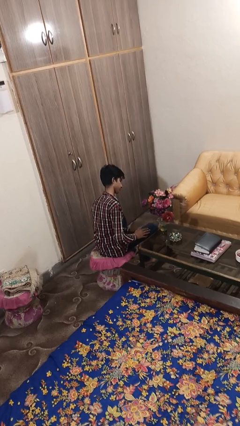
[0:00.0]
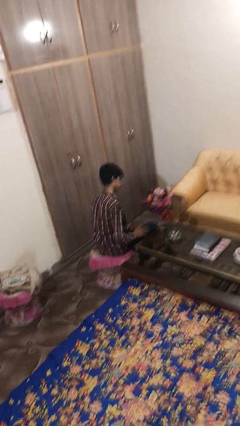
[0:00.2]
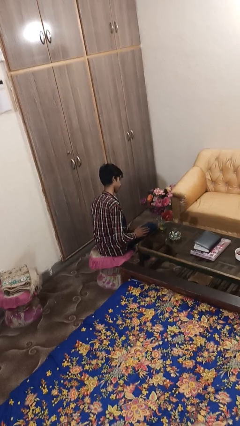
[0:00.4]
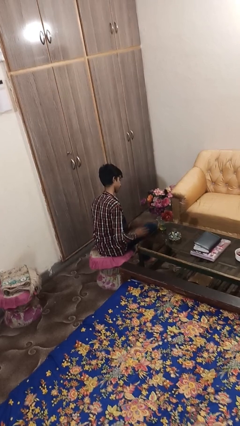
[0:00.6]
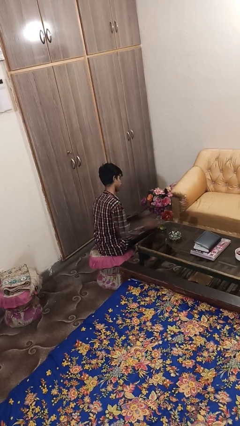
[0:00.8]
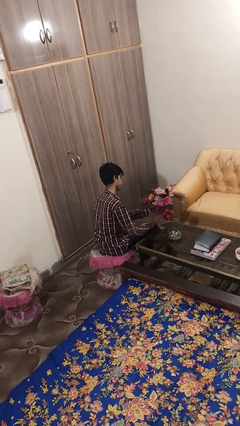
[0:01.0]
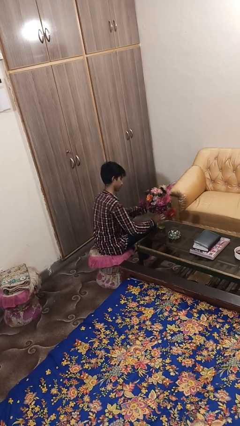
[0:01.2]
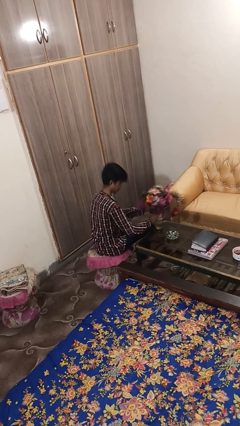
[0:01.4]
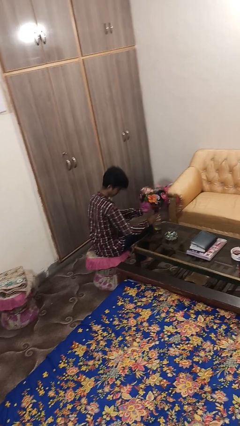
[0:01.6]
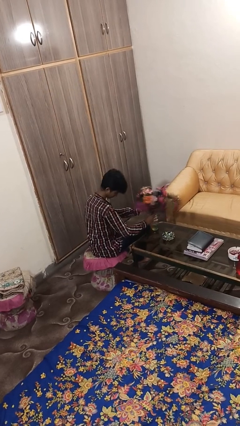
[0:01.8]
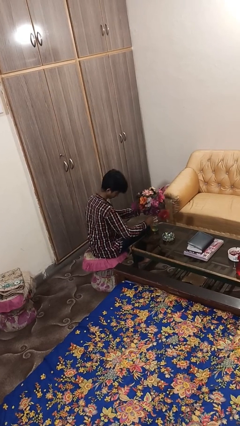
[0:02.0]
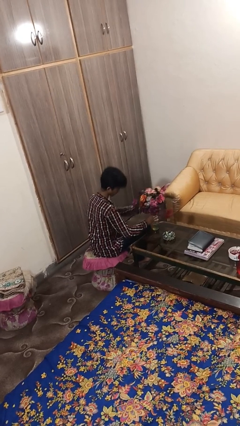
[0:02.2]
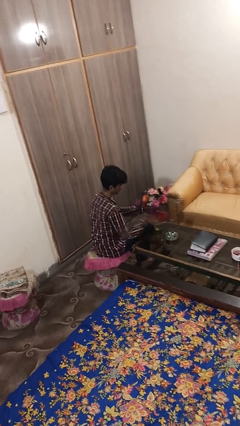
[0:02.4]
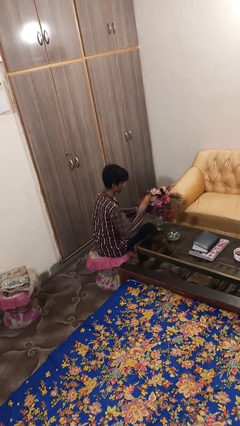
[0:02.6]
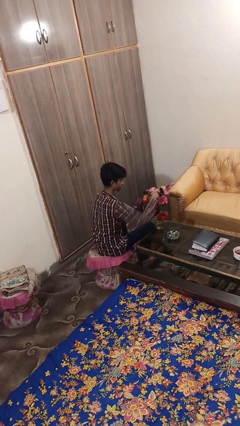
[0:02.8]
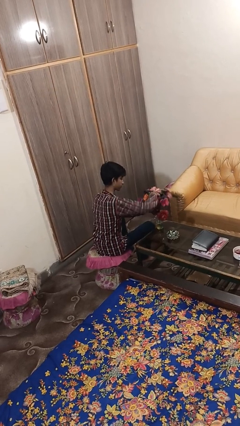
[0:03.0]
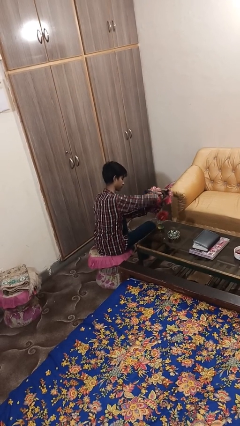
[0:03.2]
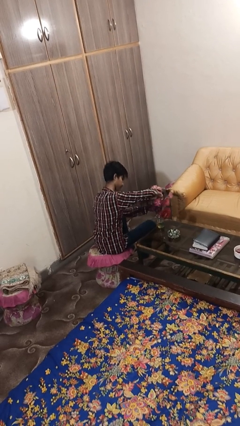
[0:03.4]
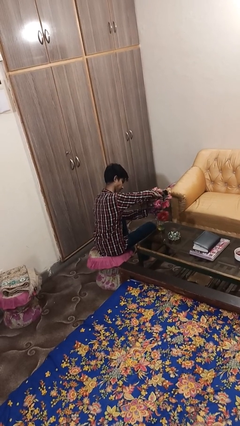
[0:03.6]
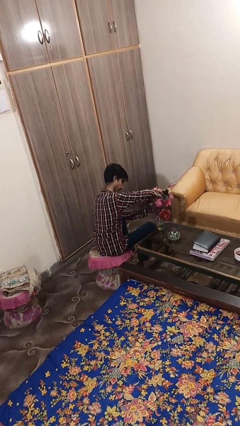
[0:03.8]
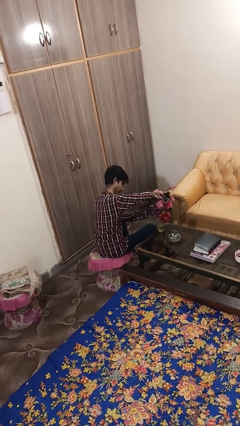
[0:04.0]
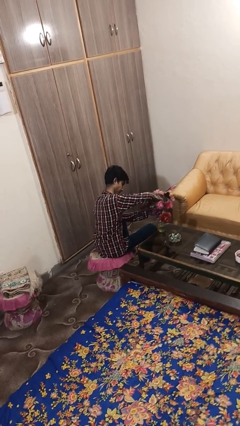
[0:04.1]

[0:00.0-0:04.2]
person arranges flowers in vase

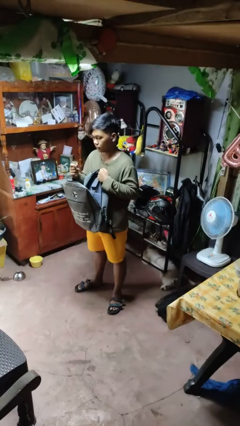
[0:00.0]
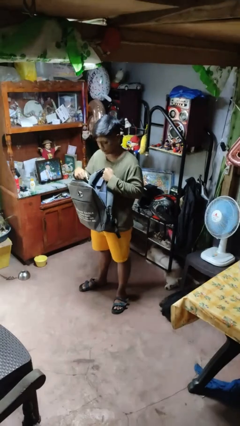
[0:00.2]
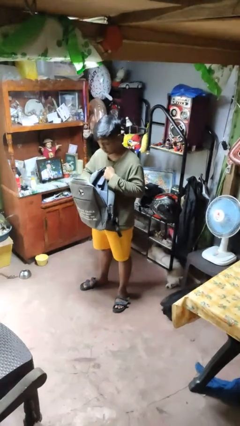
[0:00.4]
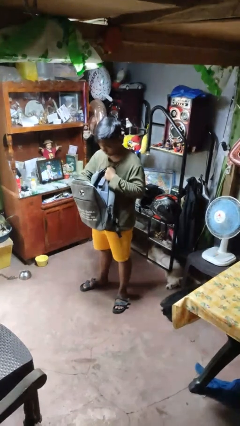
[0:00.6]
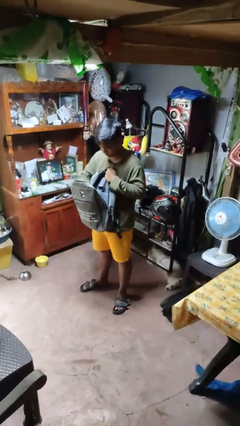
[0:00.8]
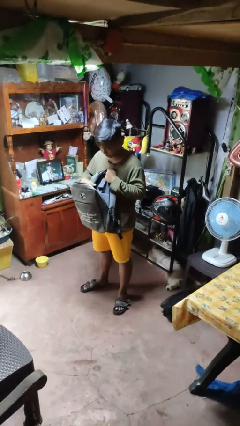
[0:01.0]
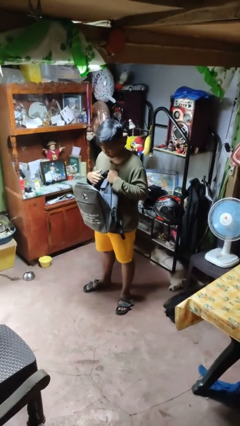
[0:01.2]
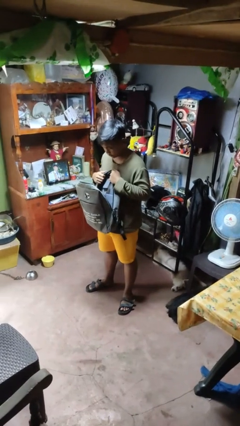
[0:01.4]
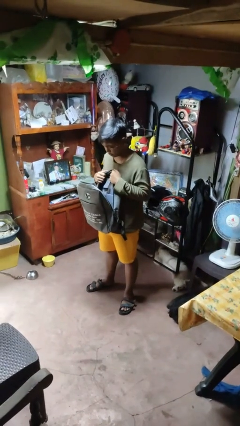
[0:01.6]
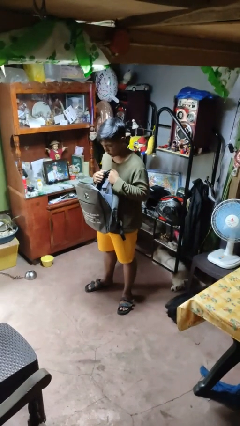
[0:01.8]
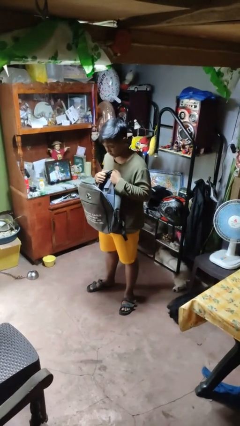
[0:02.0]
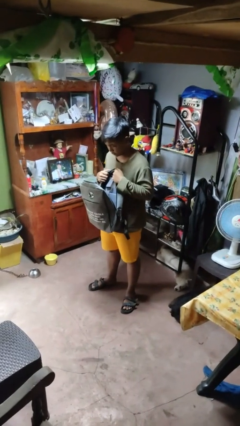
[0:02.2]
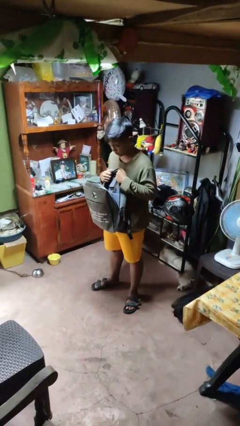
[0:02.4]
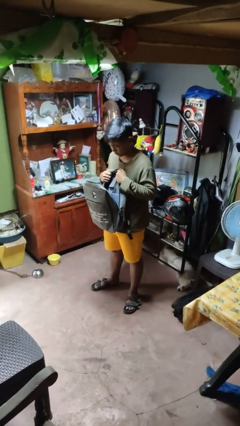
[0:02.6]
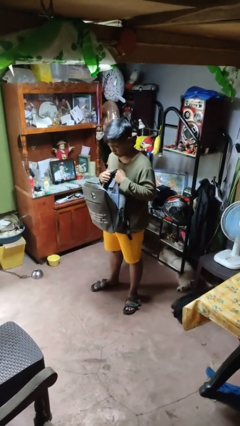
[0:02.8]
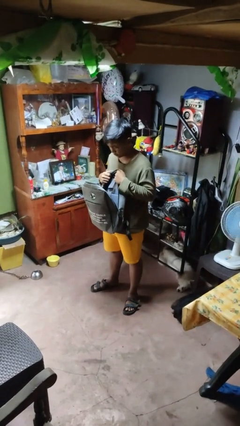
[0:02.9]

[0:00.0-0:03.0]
person puts object into backpack

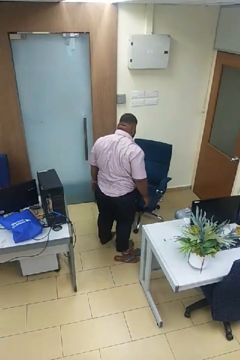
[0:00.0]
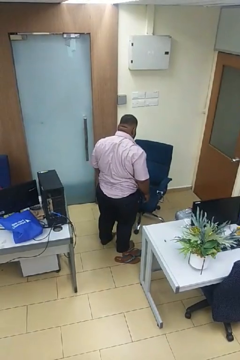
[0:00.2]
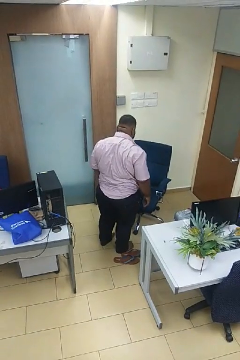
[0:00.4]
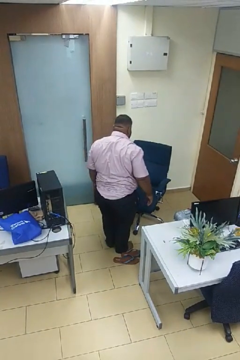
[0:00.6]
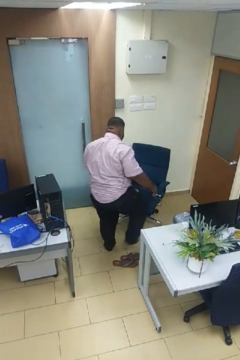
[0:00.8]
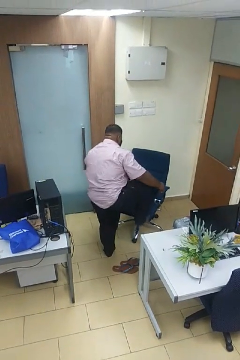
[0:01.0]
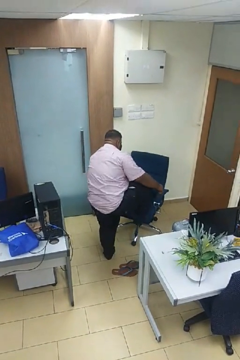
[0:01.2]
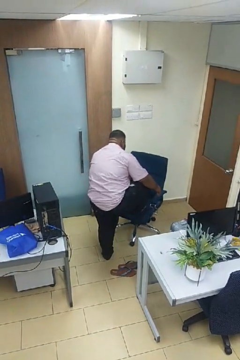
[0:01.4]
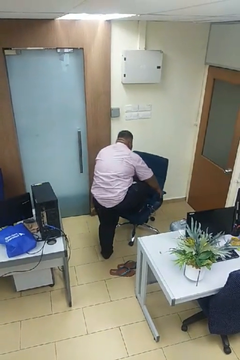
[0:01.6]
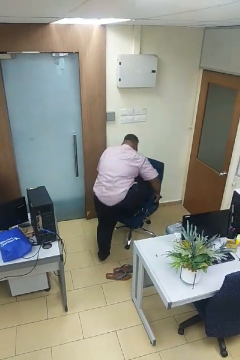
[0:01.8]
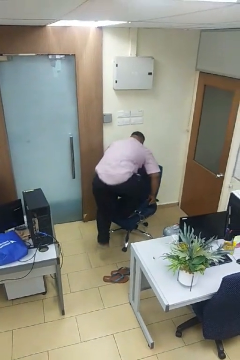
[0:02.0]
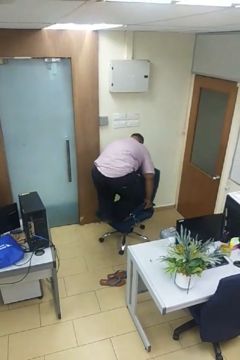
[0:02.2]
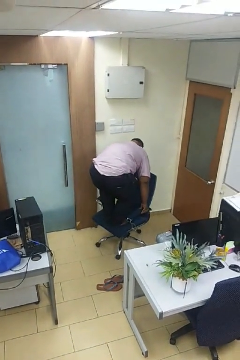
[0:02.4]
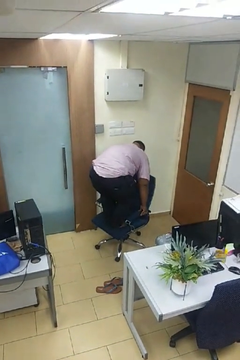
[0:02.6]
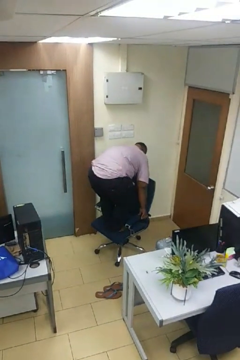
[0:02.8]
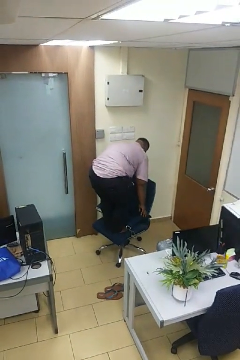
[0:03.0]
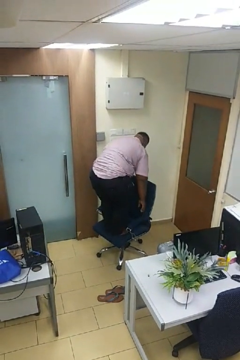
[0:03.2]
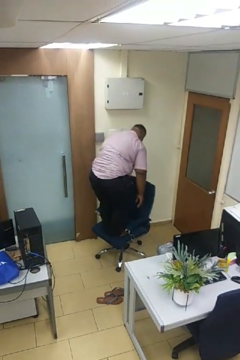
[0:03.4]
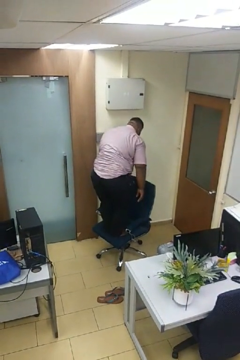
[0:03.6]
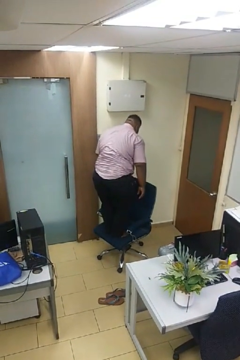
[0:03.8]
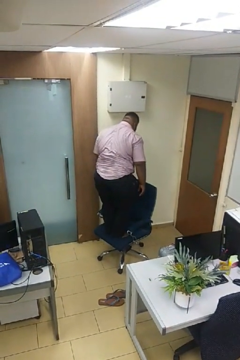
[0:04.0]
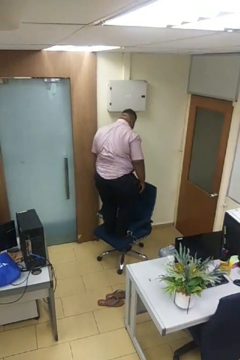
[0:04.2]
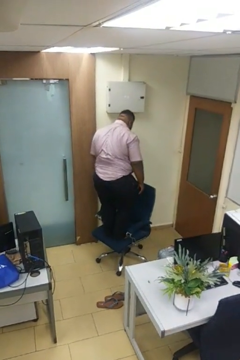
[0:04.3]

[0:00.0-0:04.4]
person climbs on chair

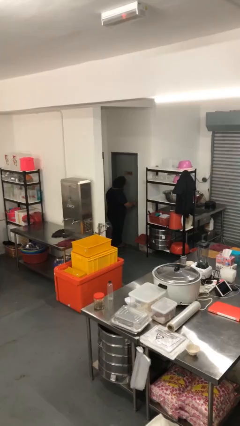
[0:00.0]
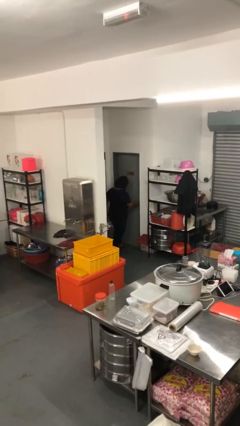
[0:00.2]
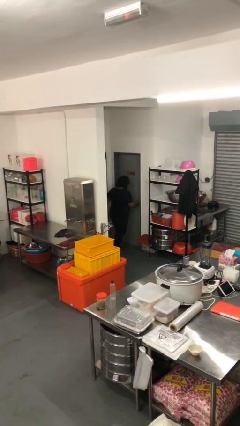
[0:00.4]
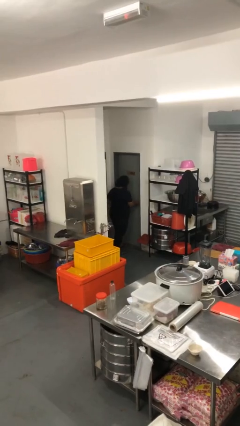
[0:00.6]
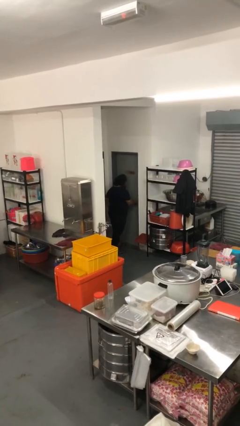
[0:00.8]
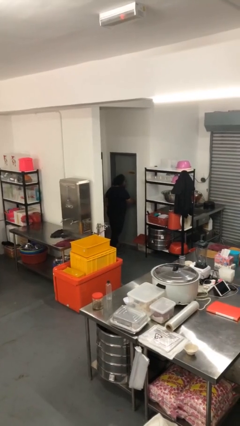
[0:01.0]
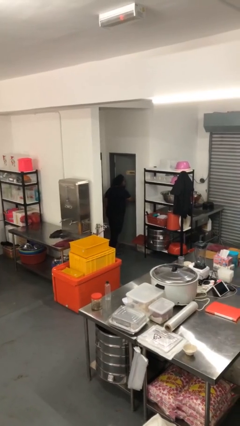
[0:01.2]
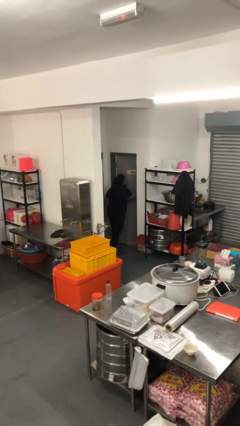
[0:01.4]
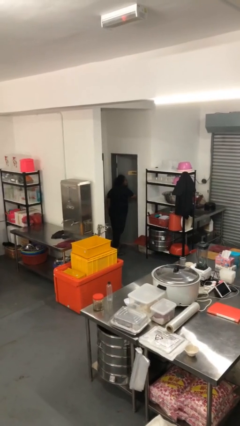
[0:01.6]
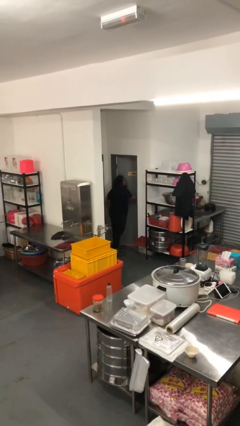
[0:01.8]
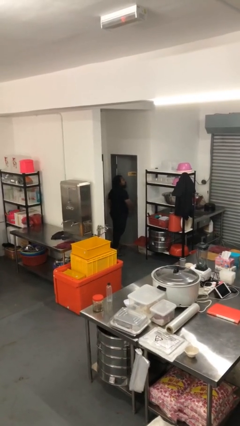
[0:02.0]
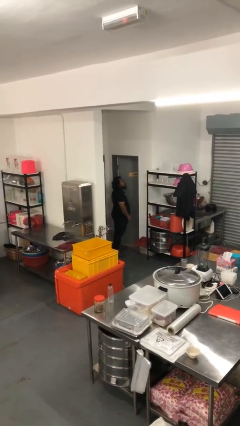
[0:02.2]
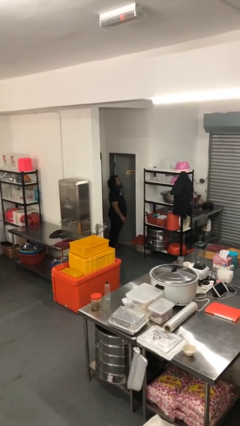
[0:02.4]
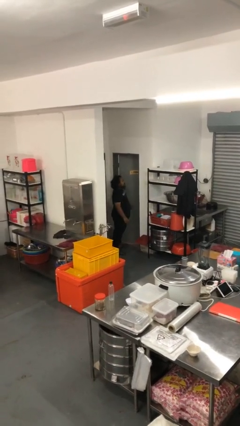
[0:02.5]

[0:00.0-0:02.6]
person opens facility door

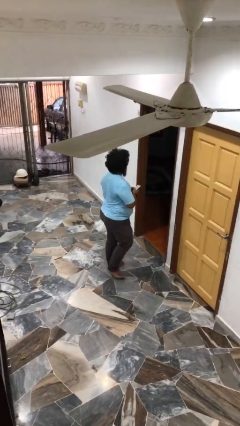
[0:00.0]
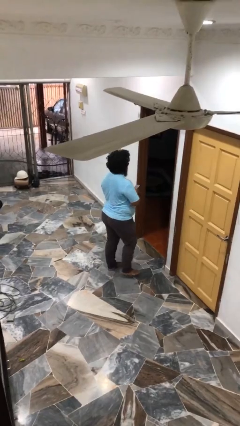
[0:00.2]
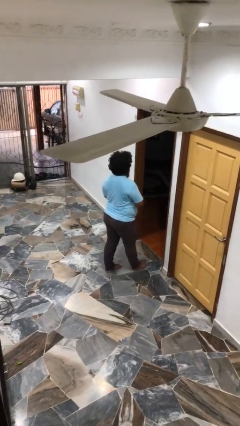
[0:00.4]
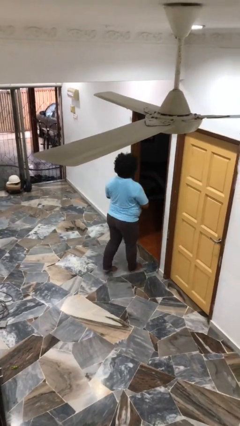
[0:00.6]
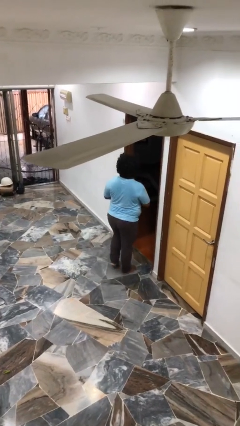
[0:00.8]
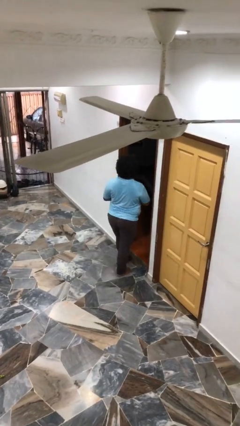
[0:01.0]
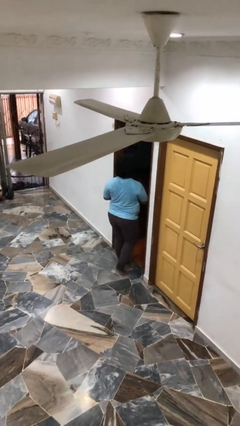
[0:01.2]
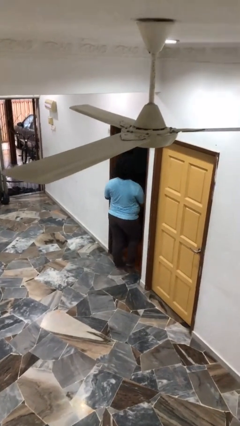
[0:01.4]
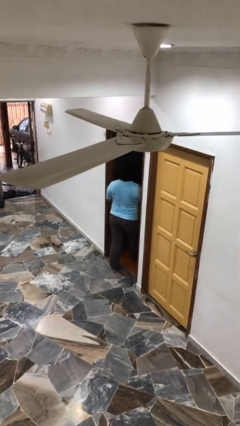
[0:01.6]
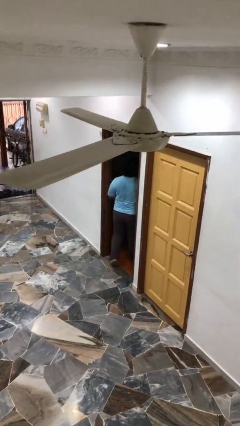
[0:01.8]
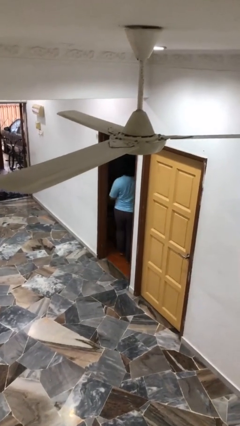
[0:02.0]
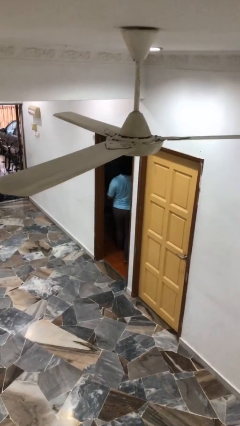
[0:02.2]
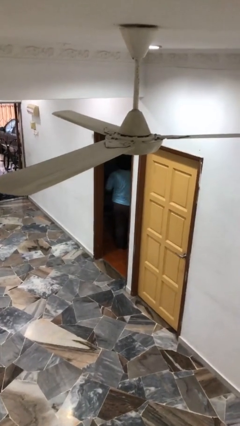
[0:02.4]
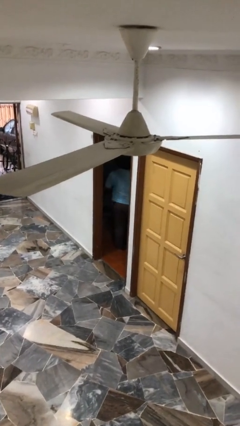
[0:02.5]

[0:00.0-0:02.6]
person exits scene through structure

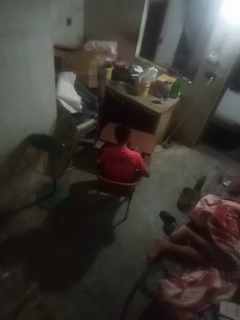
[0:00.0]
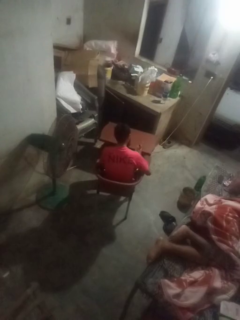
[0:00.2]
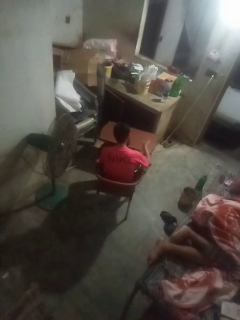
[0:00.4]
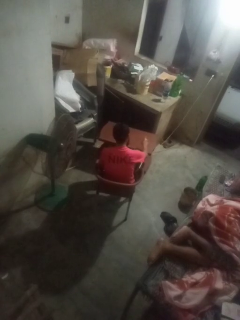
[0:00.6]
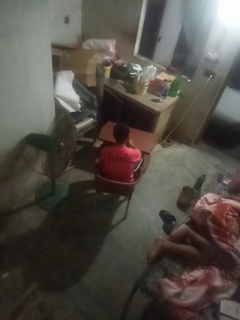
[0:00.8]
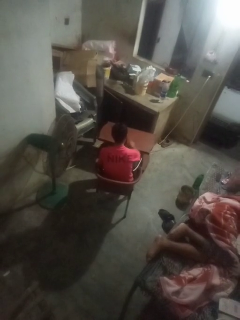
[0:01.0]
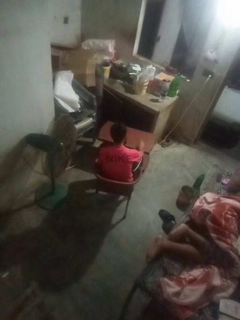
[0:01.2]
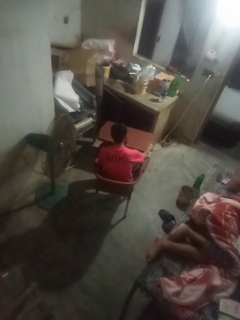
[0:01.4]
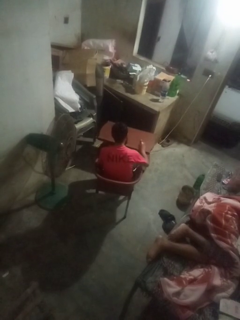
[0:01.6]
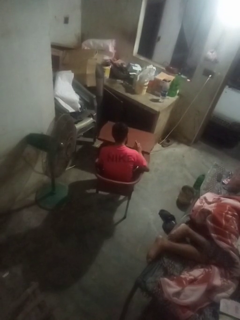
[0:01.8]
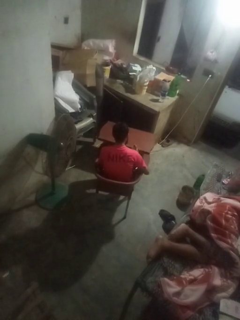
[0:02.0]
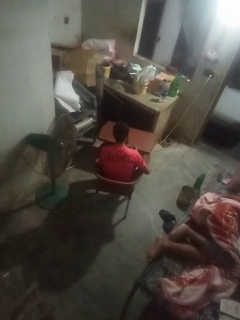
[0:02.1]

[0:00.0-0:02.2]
person sprays from bottle
